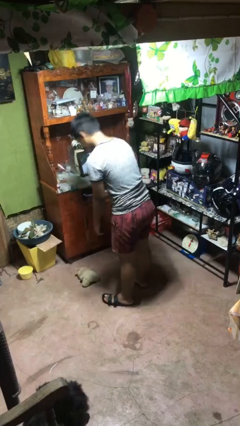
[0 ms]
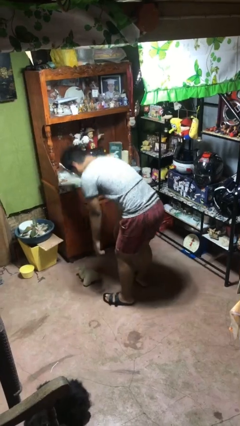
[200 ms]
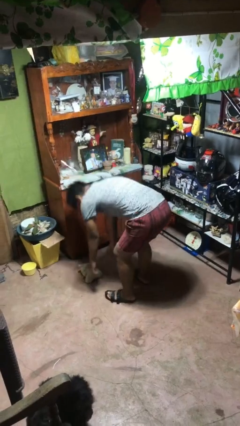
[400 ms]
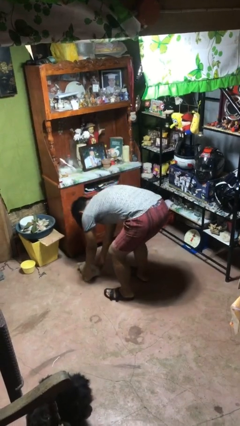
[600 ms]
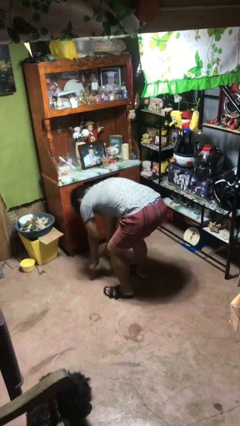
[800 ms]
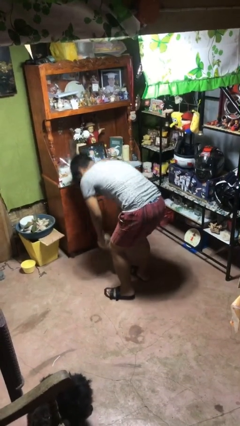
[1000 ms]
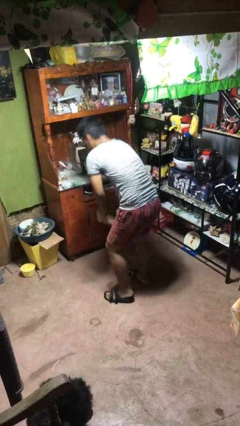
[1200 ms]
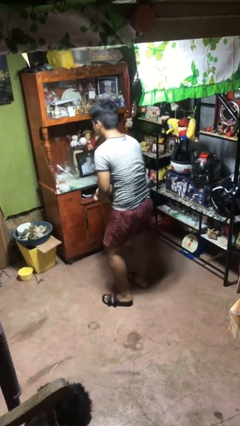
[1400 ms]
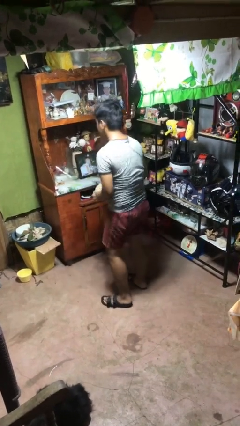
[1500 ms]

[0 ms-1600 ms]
person picks up object from floor

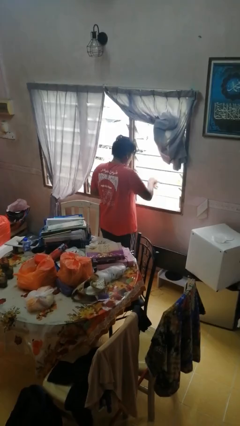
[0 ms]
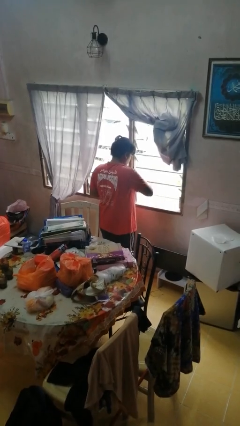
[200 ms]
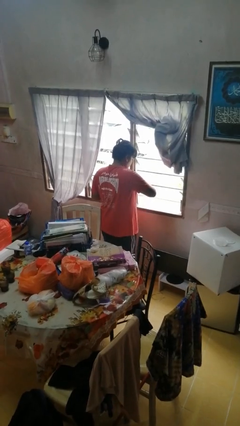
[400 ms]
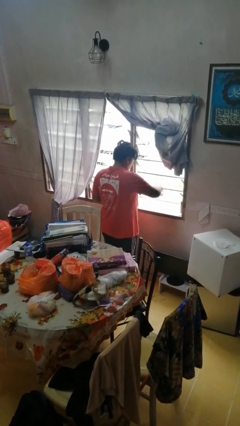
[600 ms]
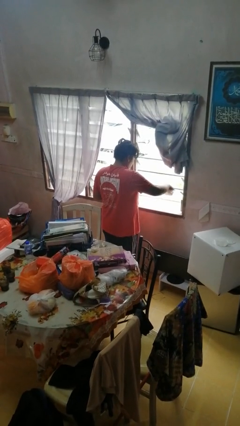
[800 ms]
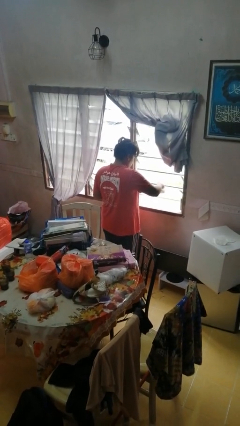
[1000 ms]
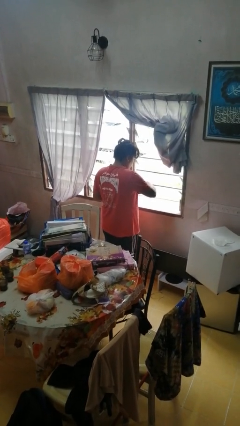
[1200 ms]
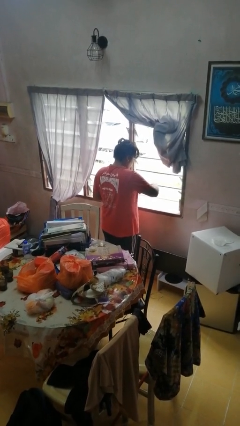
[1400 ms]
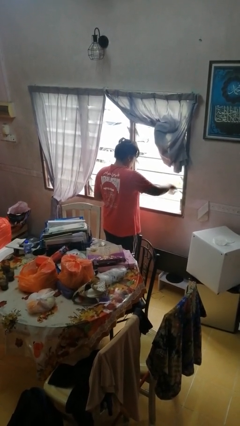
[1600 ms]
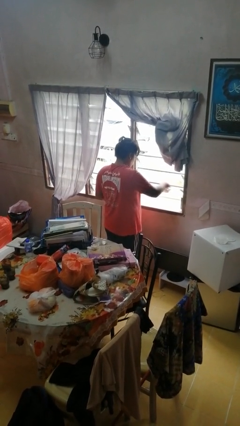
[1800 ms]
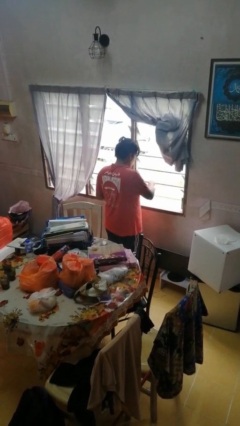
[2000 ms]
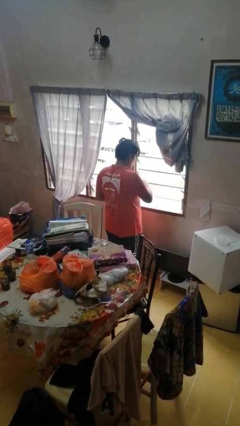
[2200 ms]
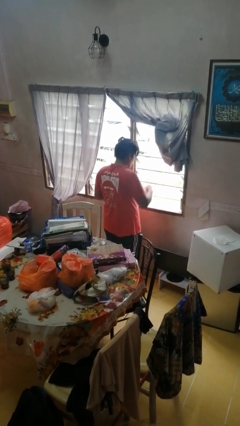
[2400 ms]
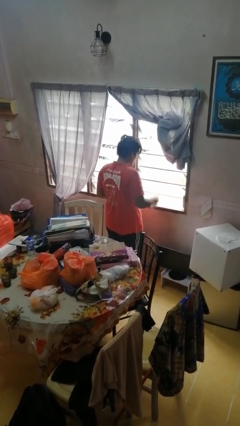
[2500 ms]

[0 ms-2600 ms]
person washes window

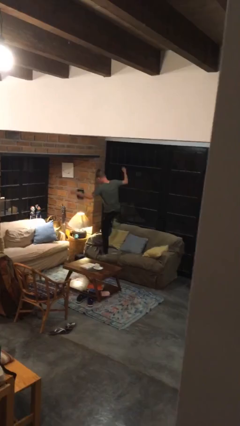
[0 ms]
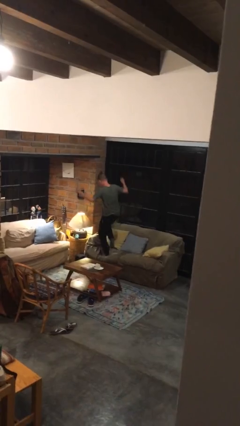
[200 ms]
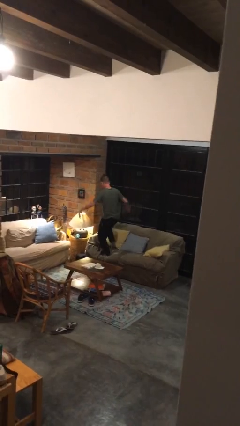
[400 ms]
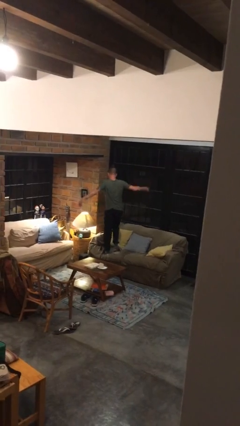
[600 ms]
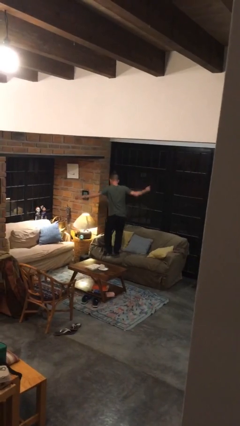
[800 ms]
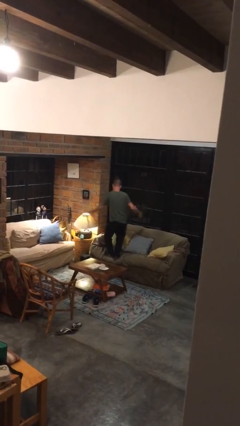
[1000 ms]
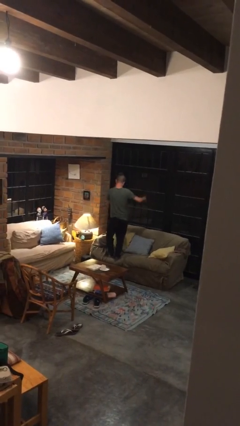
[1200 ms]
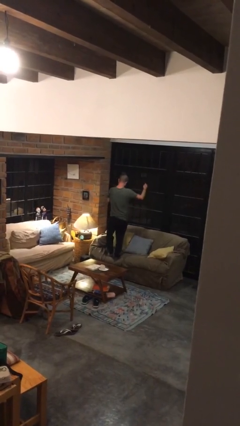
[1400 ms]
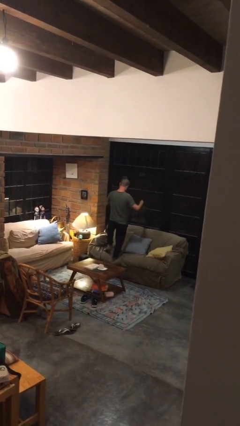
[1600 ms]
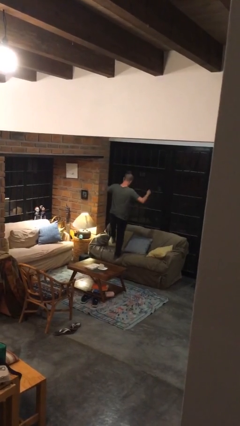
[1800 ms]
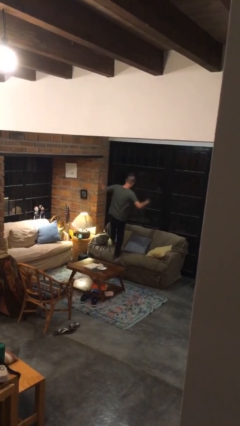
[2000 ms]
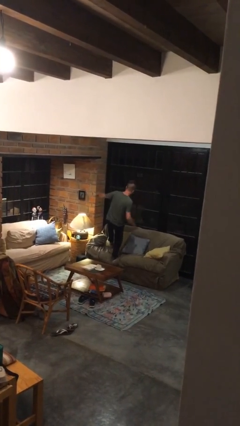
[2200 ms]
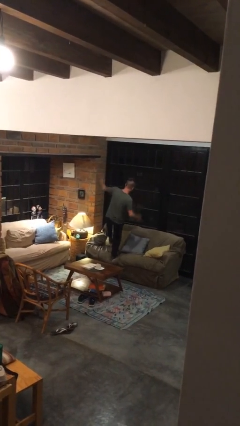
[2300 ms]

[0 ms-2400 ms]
person jumps on couch

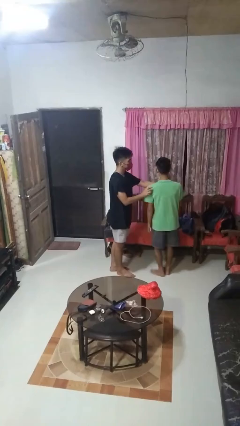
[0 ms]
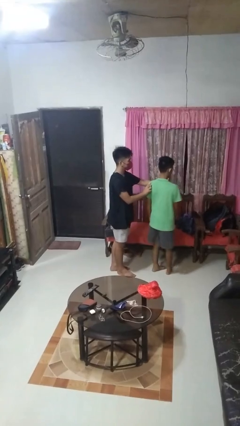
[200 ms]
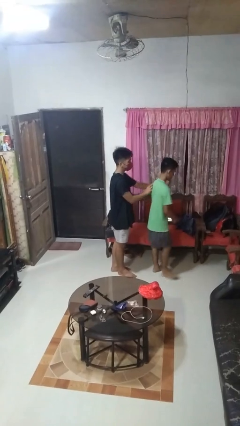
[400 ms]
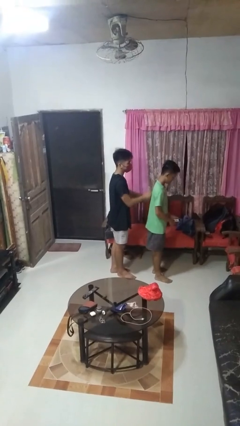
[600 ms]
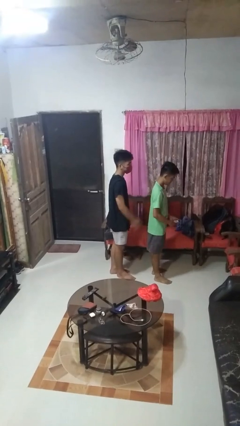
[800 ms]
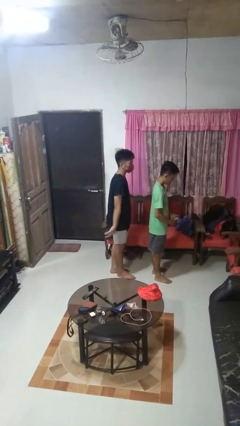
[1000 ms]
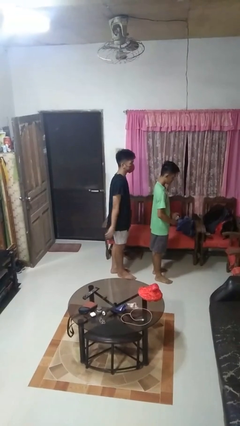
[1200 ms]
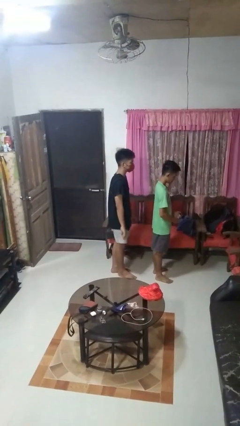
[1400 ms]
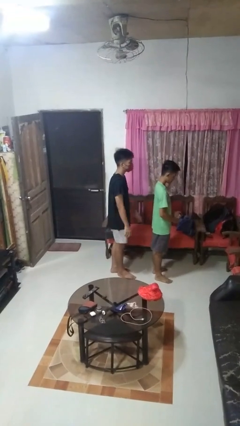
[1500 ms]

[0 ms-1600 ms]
person spins person around

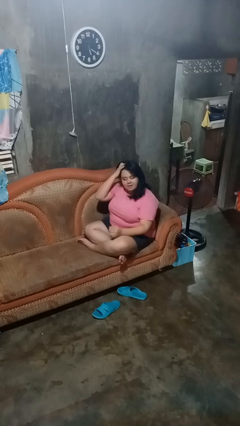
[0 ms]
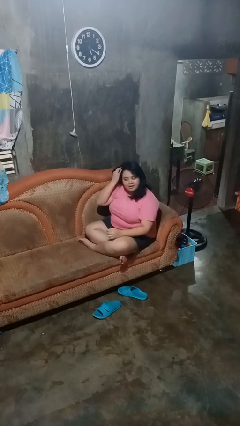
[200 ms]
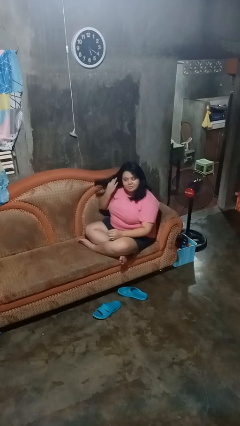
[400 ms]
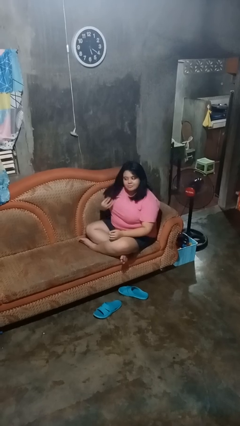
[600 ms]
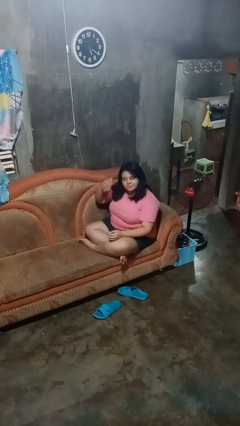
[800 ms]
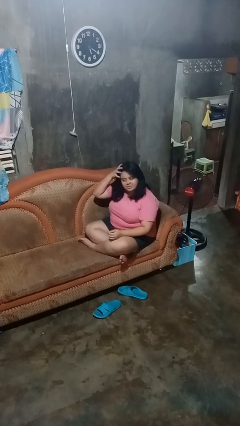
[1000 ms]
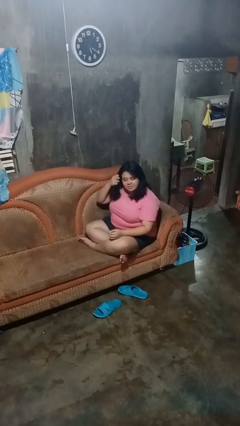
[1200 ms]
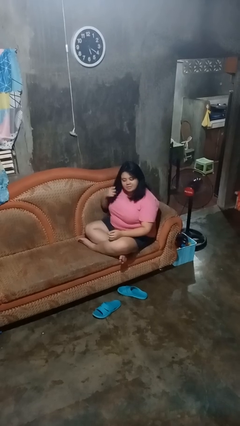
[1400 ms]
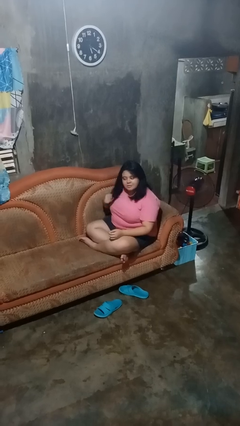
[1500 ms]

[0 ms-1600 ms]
person strokes hair

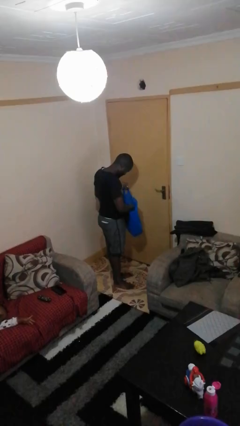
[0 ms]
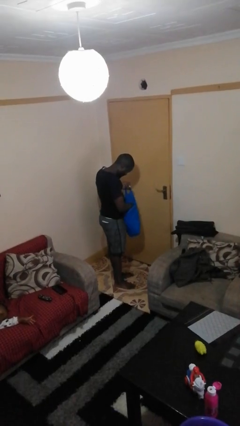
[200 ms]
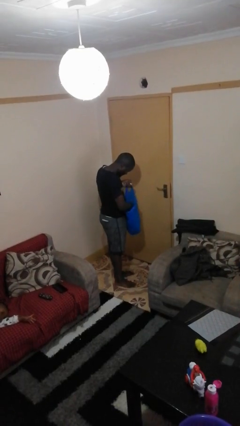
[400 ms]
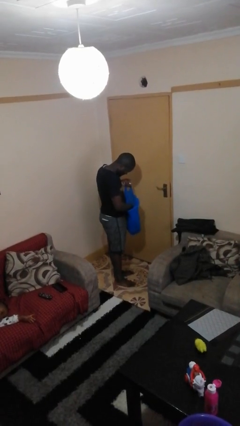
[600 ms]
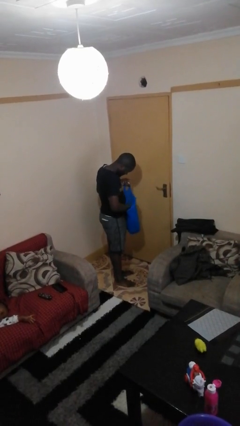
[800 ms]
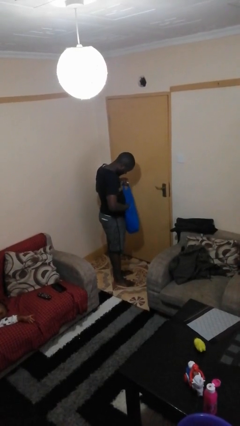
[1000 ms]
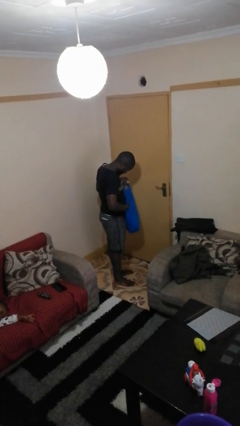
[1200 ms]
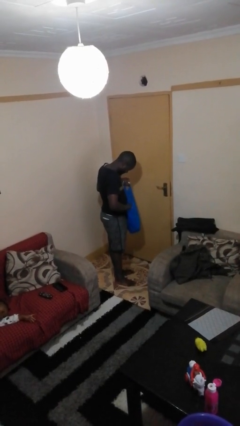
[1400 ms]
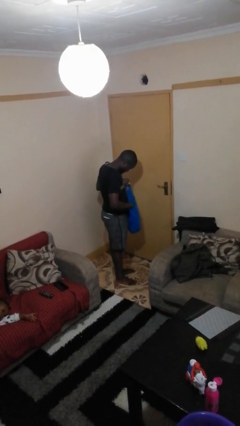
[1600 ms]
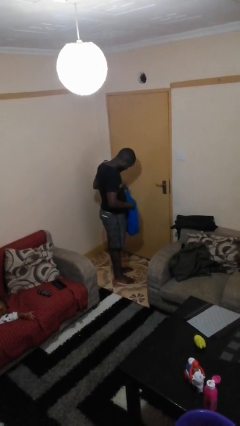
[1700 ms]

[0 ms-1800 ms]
person searches in bag

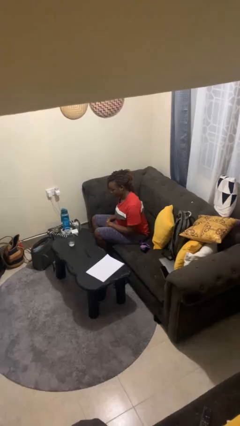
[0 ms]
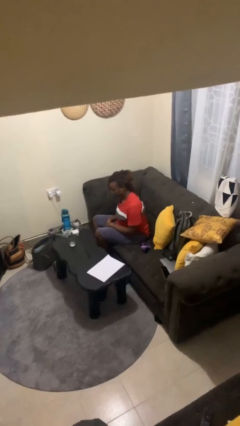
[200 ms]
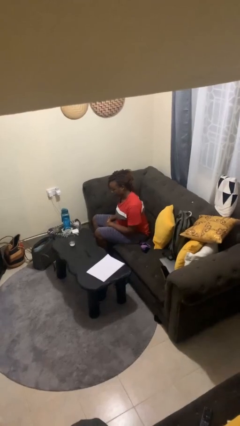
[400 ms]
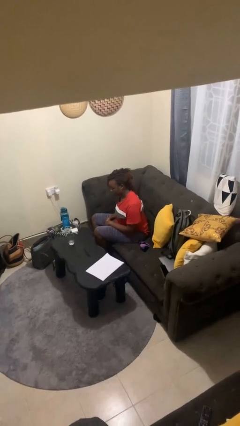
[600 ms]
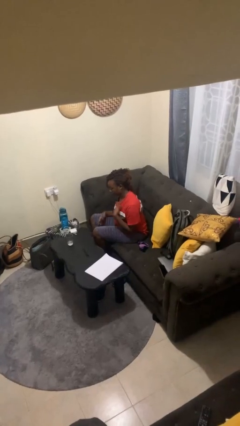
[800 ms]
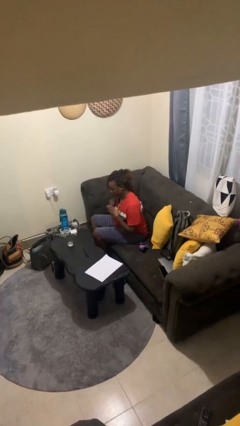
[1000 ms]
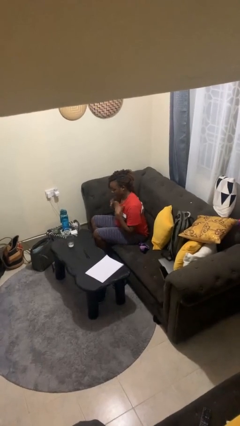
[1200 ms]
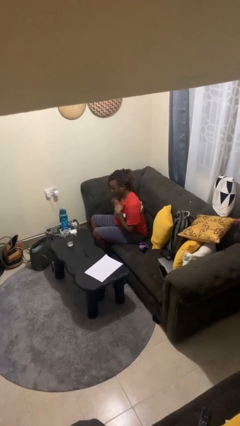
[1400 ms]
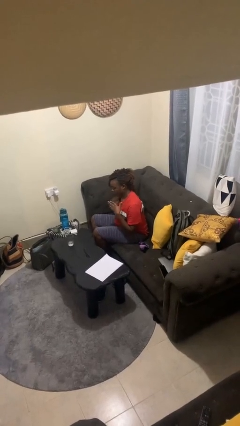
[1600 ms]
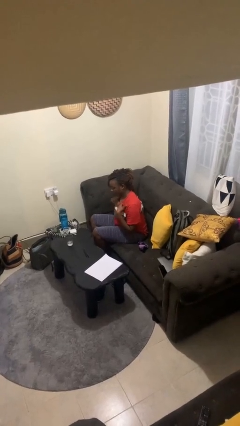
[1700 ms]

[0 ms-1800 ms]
person drums on chest

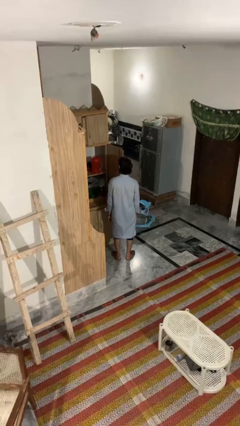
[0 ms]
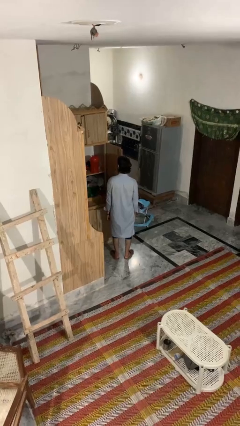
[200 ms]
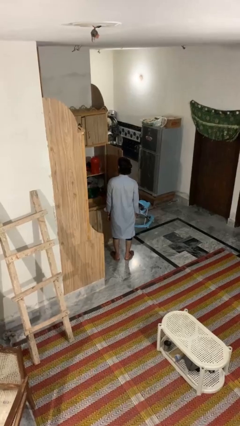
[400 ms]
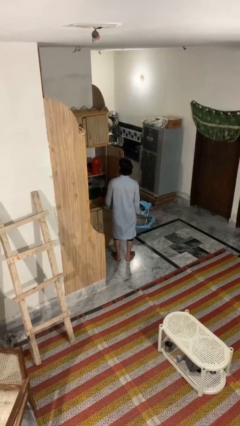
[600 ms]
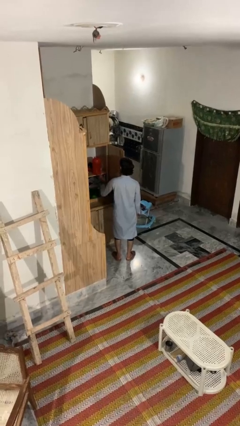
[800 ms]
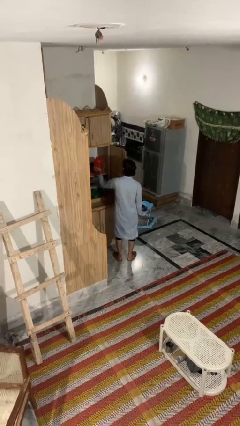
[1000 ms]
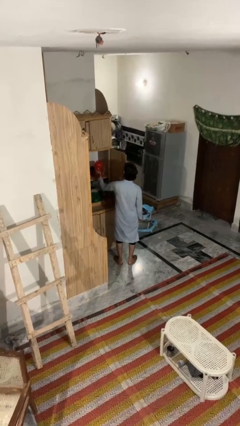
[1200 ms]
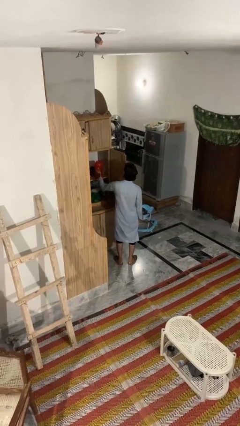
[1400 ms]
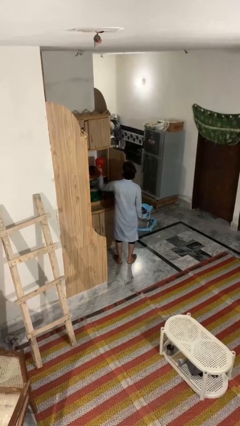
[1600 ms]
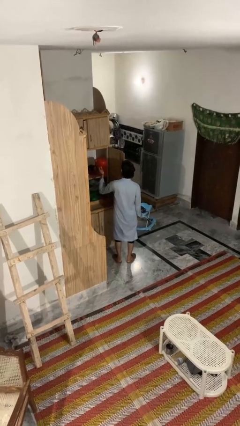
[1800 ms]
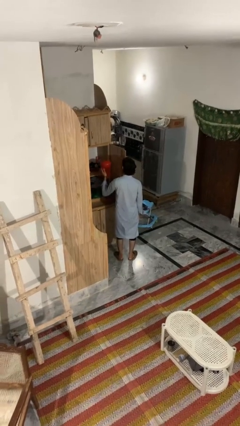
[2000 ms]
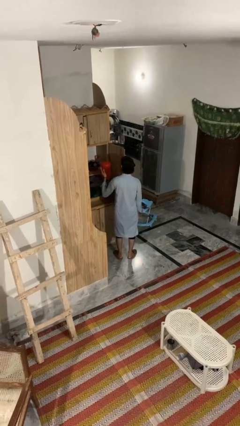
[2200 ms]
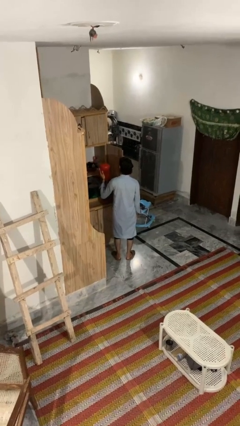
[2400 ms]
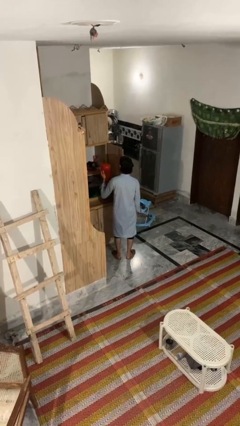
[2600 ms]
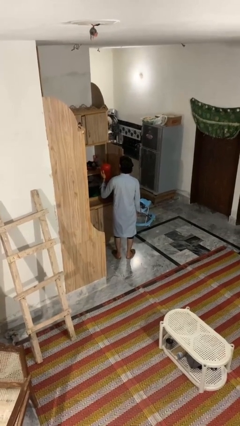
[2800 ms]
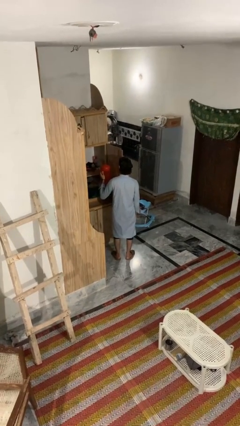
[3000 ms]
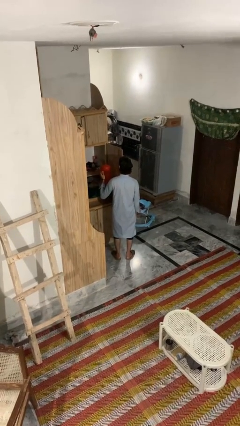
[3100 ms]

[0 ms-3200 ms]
person picks up object from cabinet

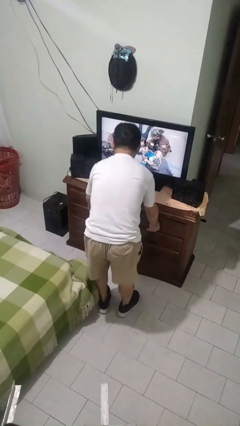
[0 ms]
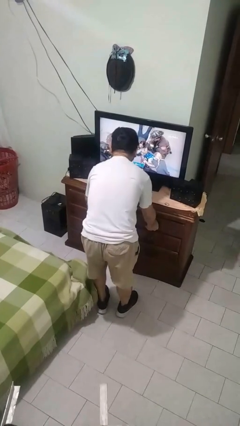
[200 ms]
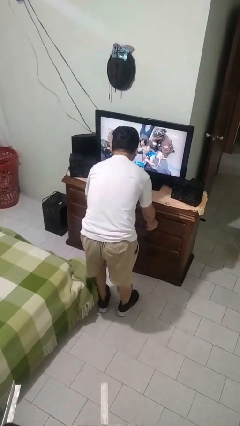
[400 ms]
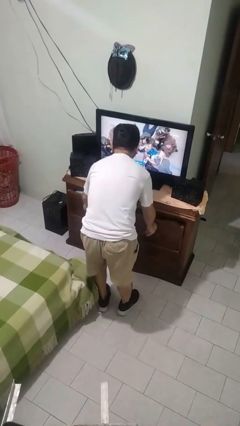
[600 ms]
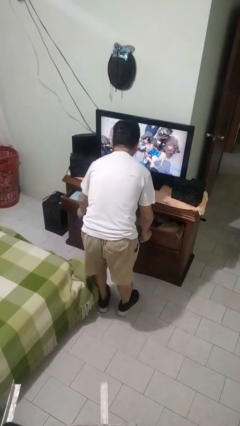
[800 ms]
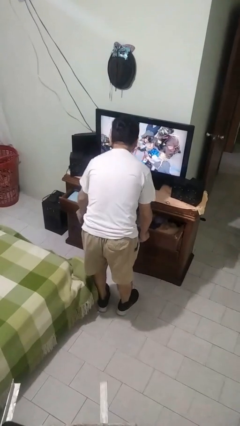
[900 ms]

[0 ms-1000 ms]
person opens dresser drawer
